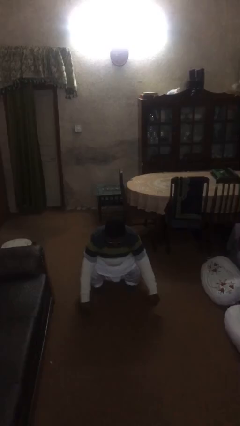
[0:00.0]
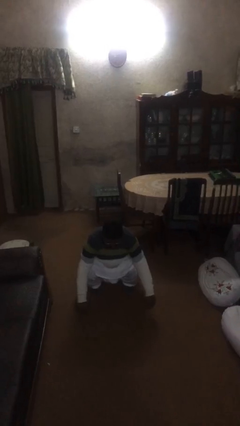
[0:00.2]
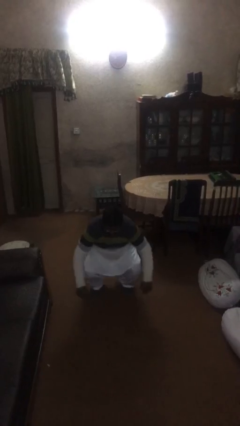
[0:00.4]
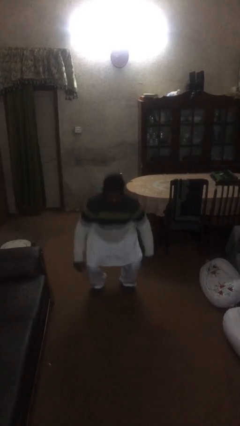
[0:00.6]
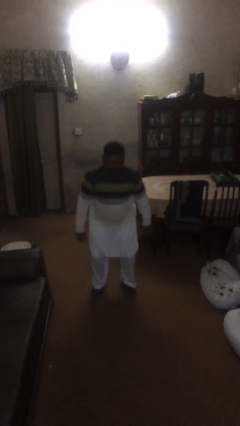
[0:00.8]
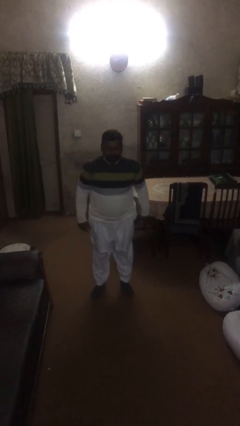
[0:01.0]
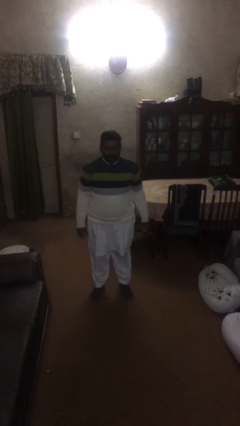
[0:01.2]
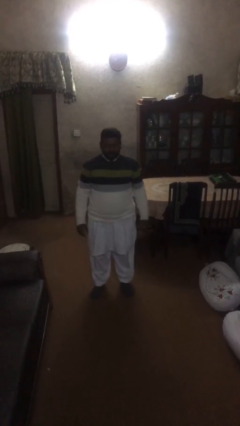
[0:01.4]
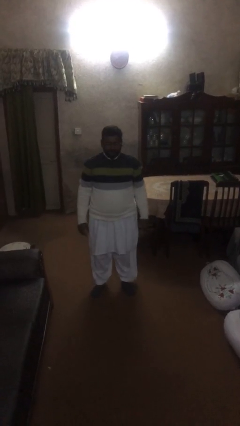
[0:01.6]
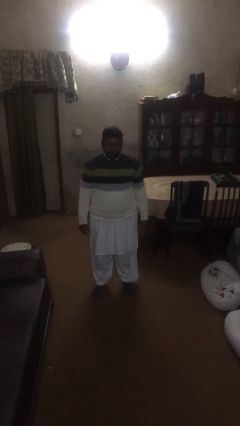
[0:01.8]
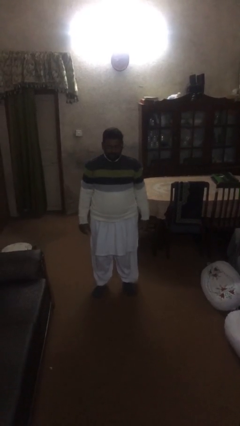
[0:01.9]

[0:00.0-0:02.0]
person stands up

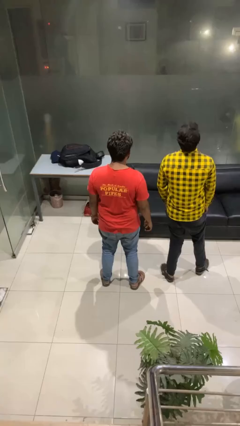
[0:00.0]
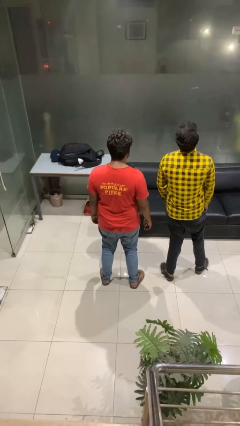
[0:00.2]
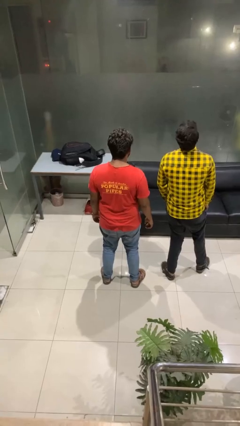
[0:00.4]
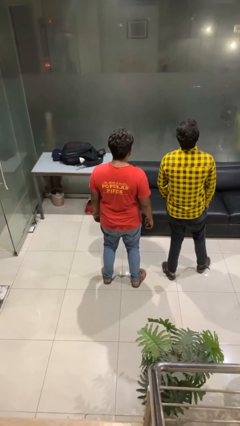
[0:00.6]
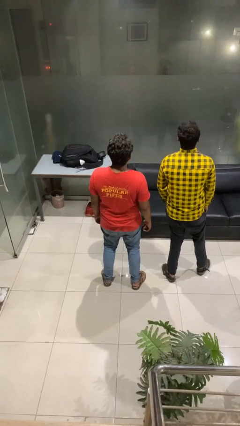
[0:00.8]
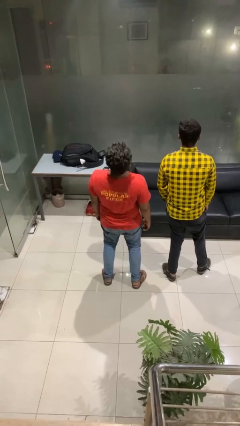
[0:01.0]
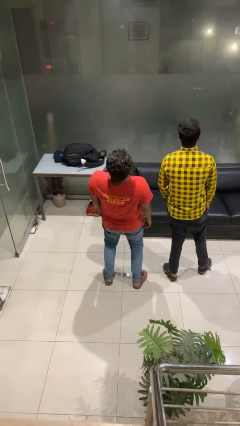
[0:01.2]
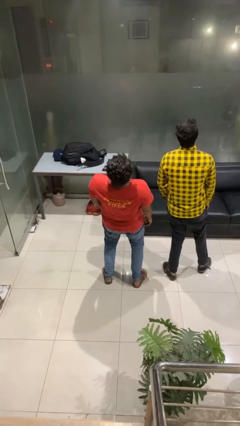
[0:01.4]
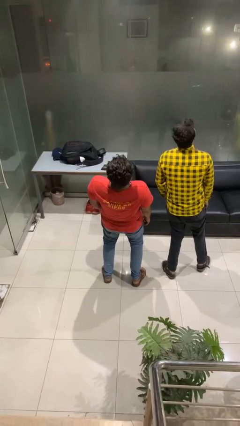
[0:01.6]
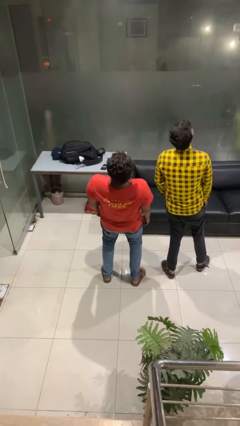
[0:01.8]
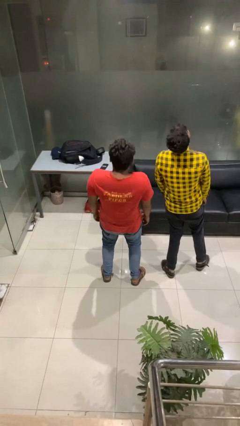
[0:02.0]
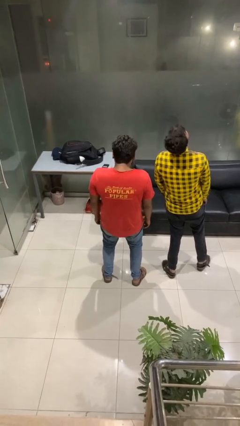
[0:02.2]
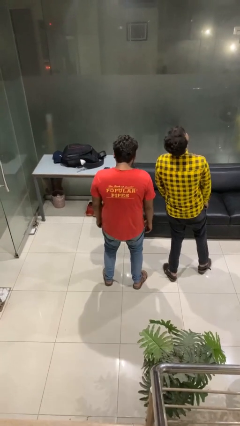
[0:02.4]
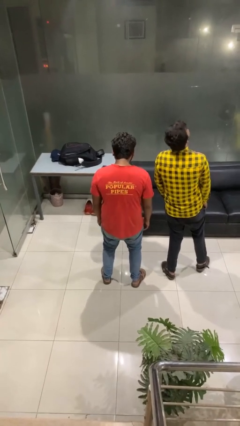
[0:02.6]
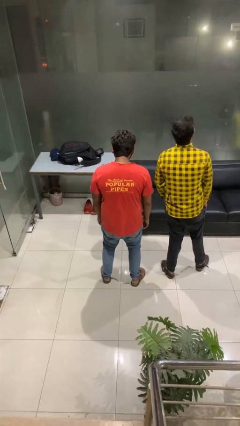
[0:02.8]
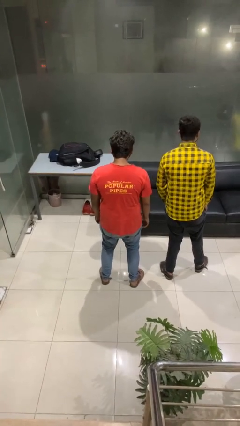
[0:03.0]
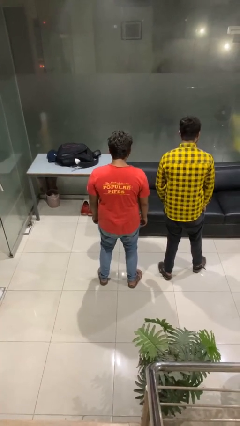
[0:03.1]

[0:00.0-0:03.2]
person laughs with person

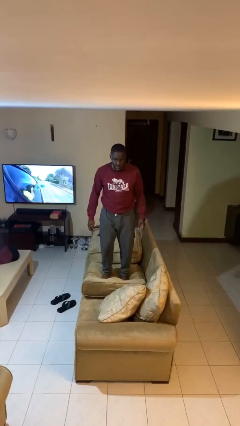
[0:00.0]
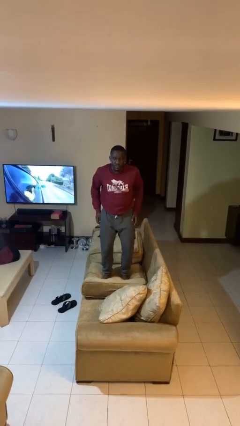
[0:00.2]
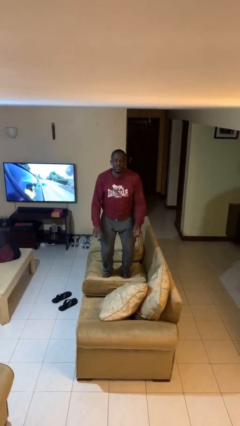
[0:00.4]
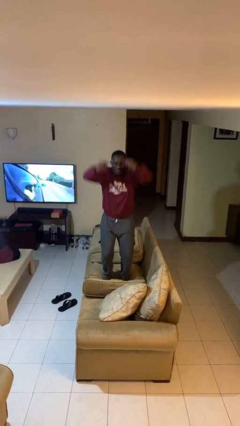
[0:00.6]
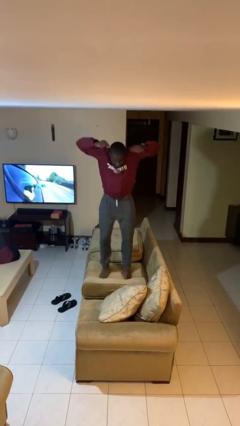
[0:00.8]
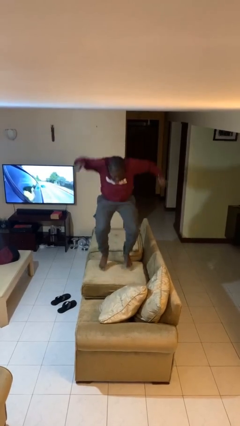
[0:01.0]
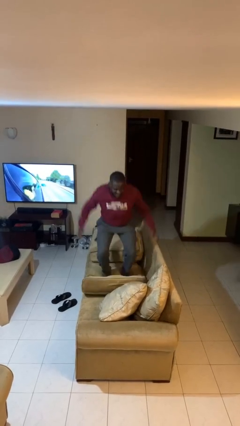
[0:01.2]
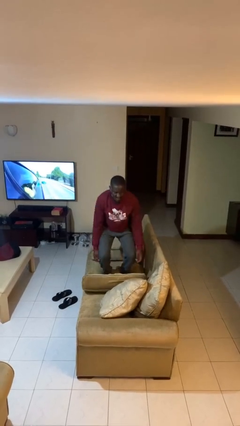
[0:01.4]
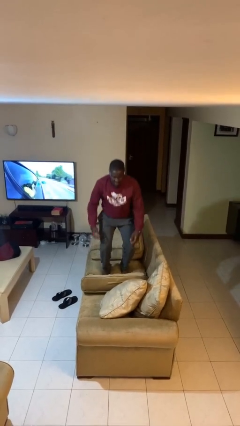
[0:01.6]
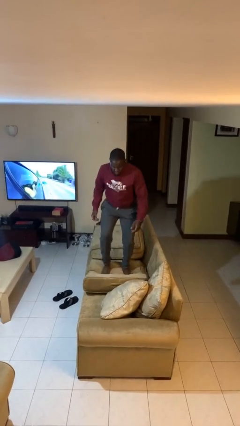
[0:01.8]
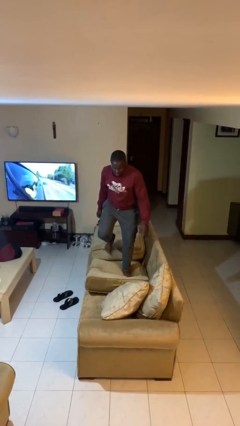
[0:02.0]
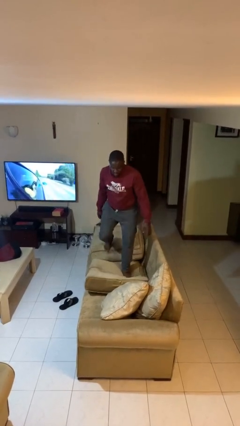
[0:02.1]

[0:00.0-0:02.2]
person jumps on couch

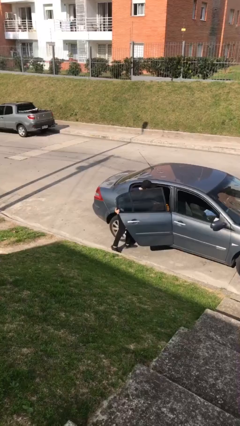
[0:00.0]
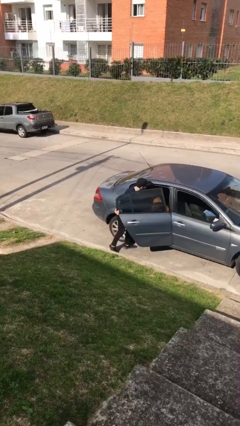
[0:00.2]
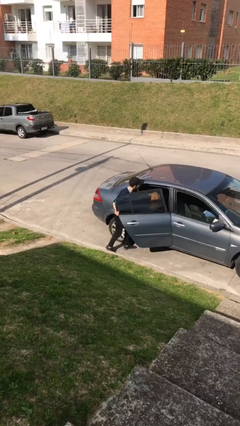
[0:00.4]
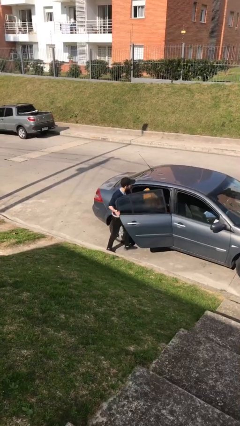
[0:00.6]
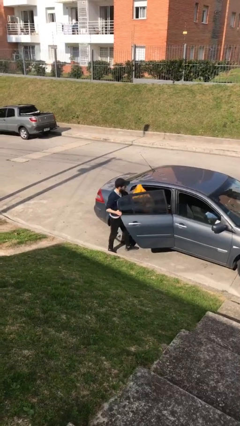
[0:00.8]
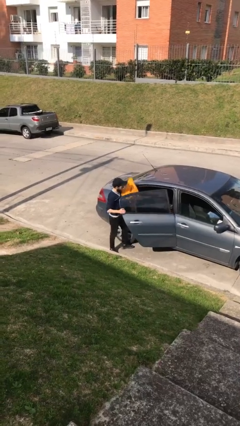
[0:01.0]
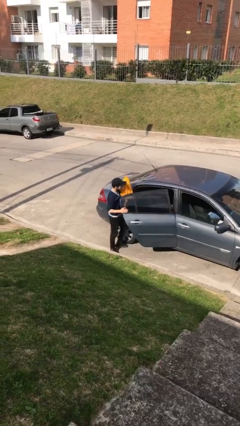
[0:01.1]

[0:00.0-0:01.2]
person unloads car

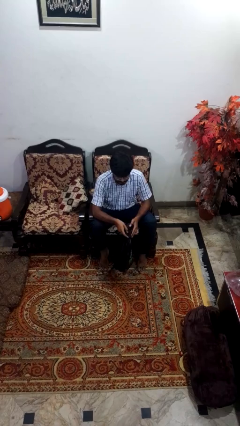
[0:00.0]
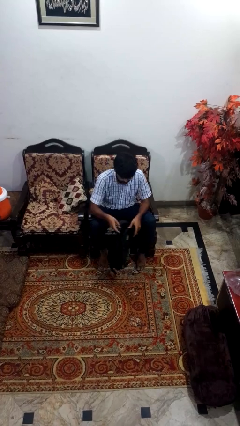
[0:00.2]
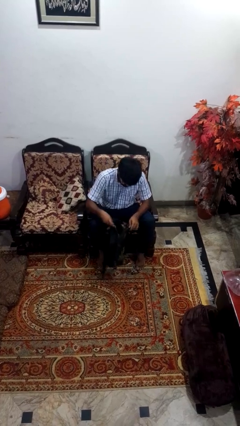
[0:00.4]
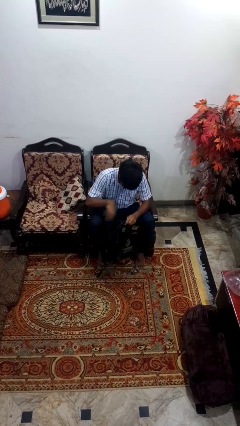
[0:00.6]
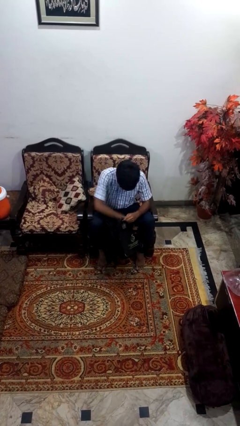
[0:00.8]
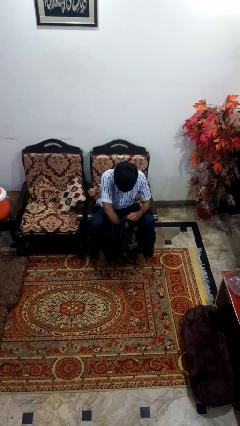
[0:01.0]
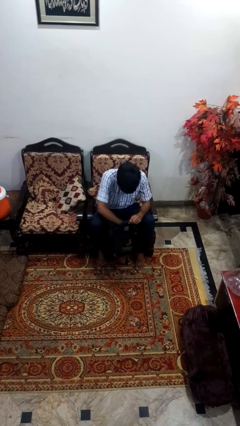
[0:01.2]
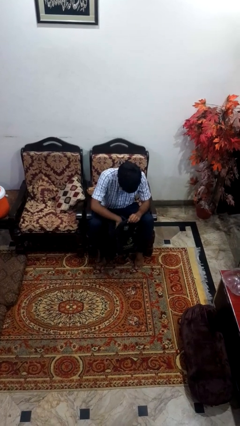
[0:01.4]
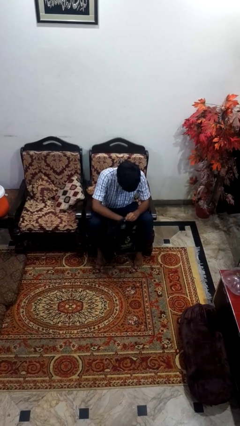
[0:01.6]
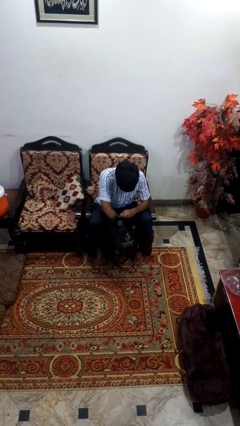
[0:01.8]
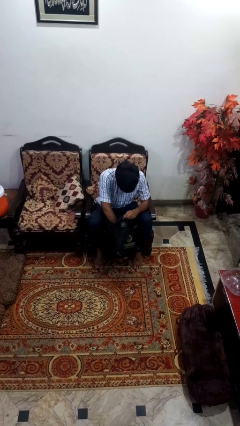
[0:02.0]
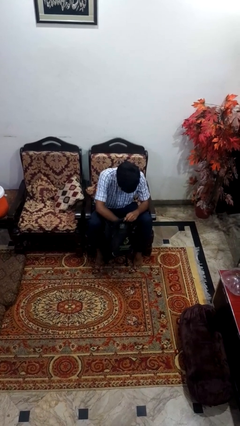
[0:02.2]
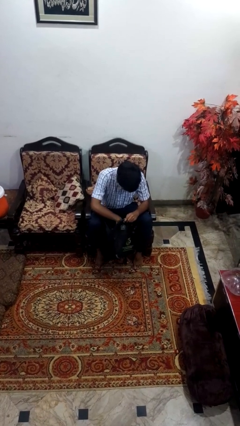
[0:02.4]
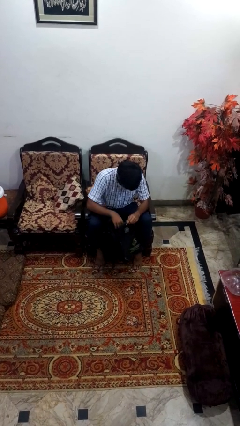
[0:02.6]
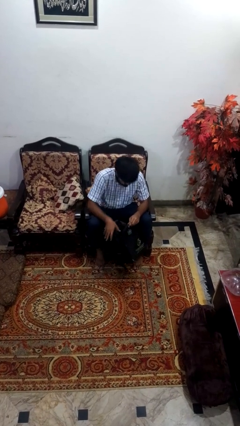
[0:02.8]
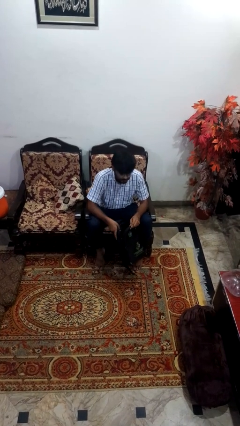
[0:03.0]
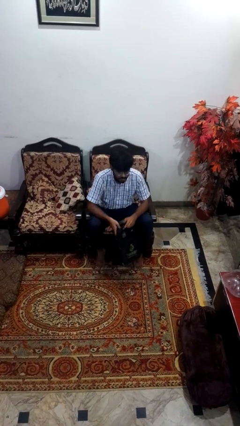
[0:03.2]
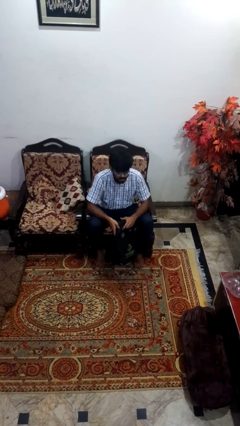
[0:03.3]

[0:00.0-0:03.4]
person searches in bag

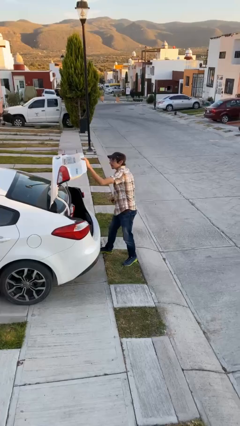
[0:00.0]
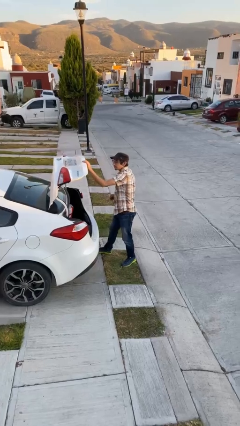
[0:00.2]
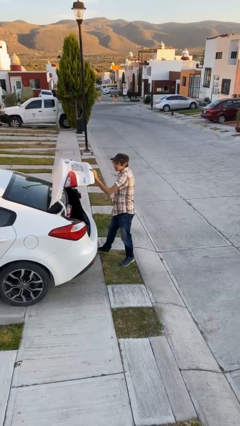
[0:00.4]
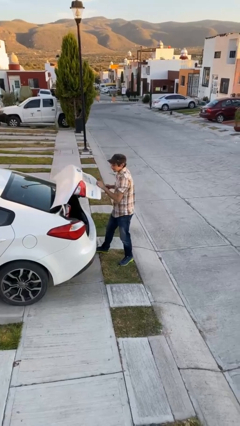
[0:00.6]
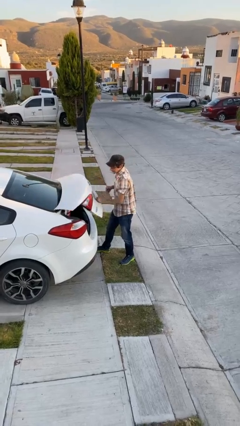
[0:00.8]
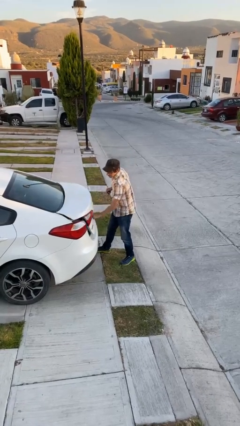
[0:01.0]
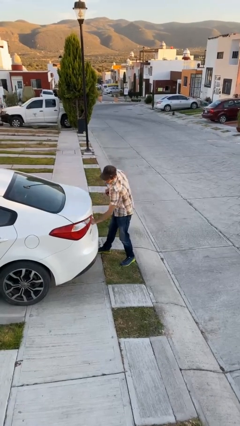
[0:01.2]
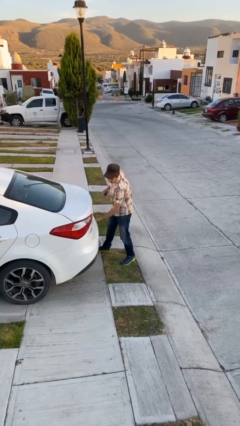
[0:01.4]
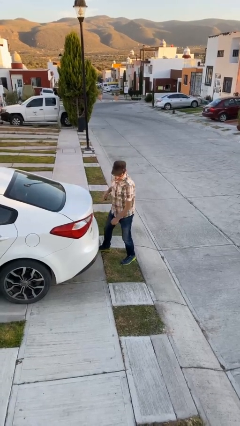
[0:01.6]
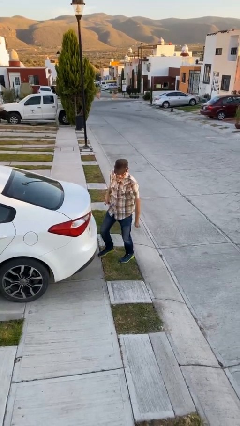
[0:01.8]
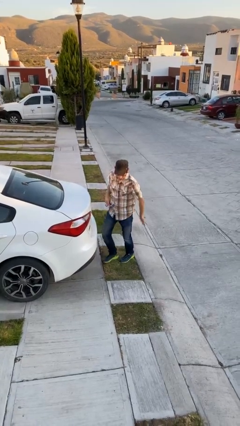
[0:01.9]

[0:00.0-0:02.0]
person closes car trunk

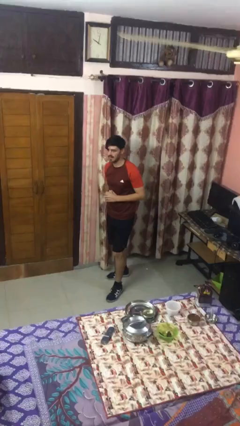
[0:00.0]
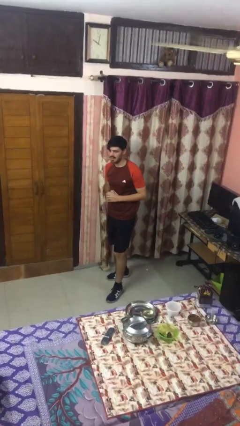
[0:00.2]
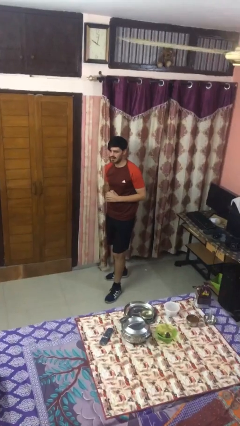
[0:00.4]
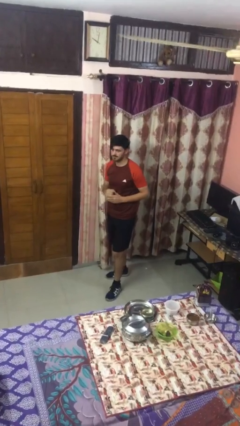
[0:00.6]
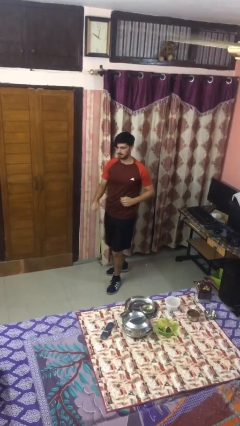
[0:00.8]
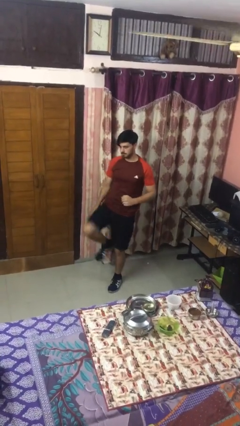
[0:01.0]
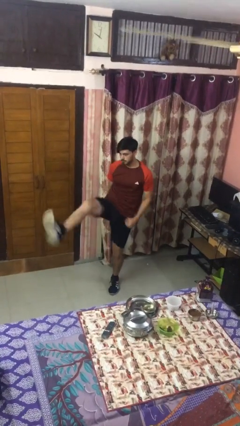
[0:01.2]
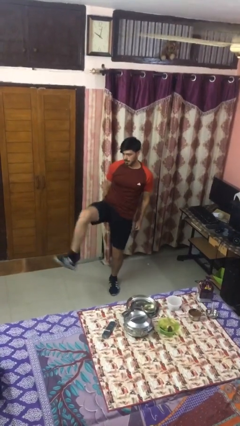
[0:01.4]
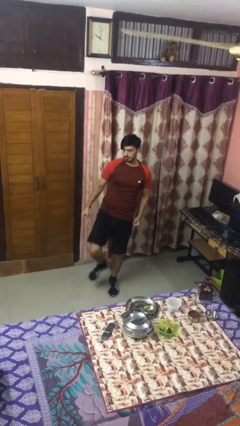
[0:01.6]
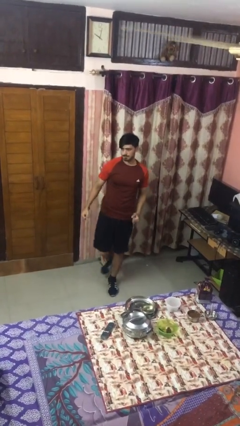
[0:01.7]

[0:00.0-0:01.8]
person karate kicks

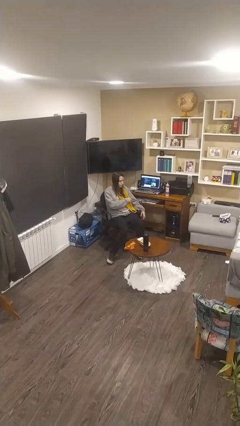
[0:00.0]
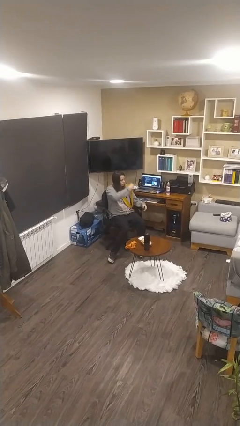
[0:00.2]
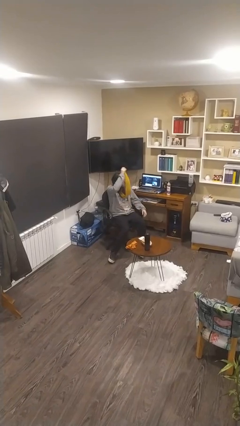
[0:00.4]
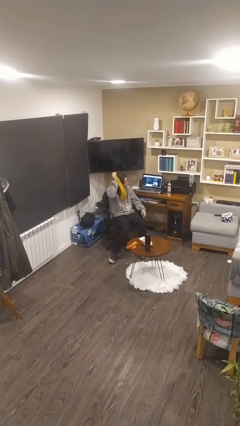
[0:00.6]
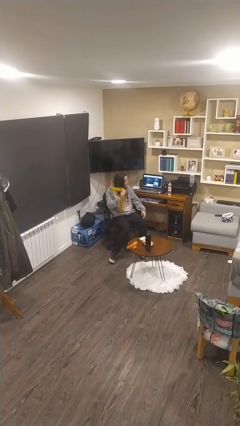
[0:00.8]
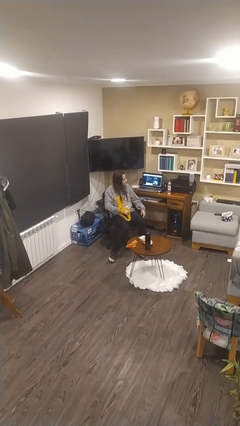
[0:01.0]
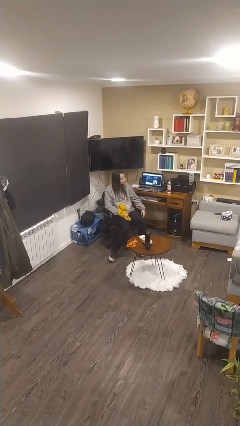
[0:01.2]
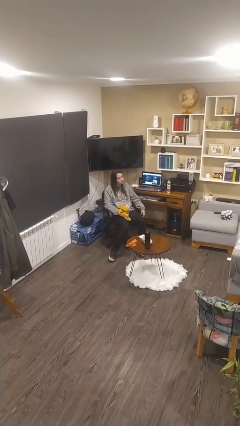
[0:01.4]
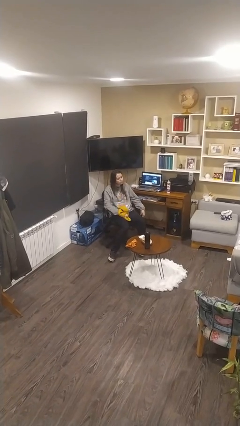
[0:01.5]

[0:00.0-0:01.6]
person takes off scarf
